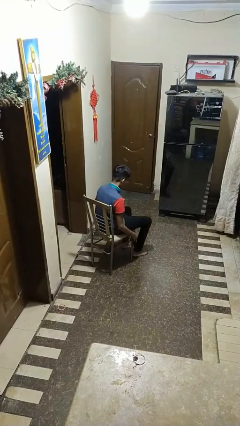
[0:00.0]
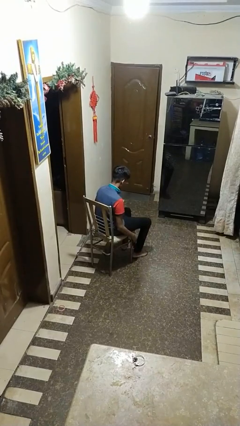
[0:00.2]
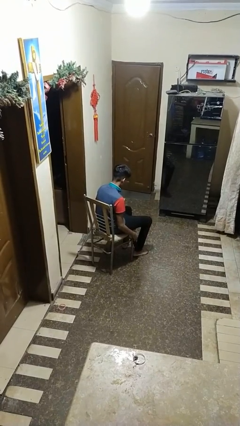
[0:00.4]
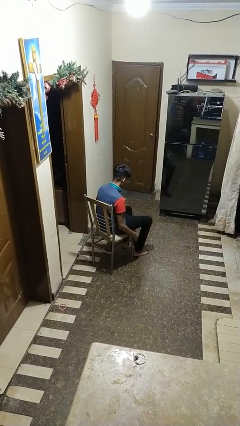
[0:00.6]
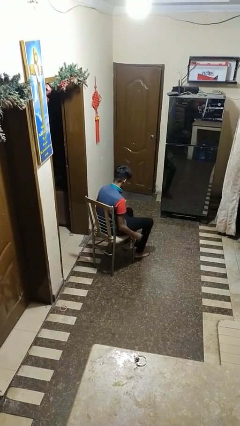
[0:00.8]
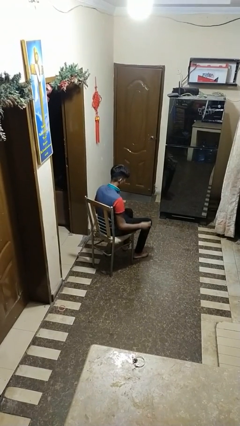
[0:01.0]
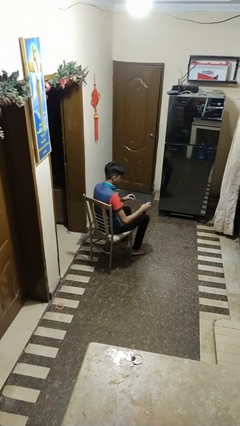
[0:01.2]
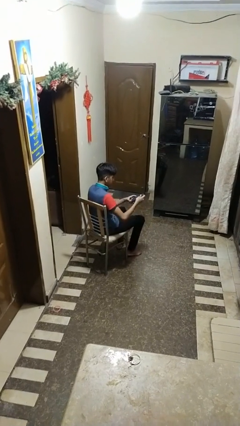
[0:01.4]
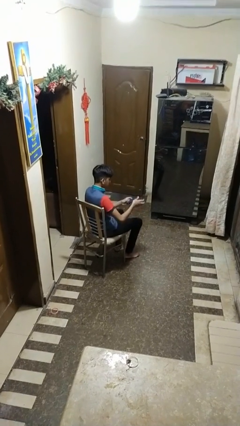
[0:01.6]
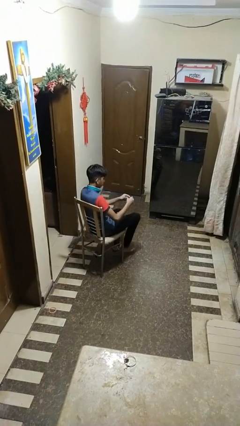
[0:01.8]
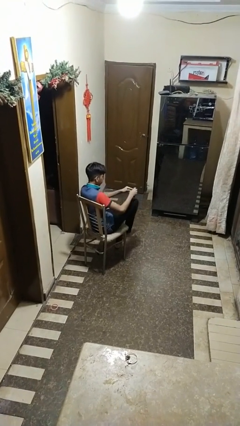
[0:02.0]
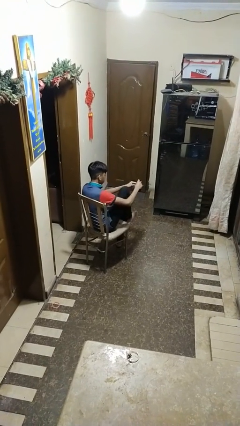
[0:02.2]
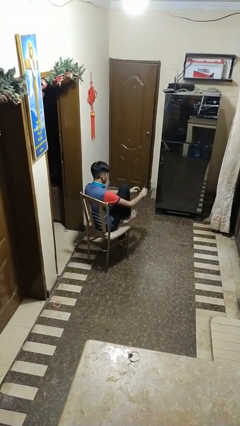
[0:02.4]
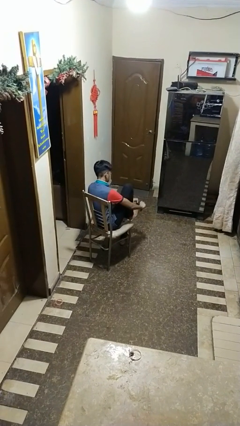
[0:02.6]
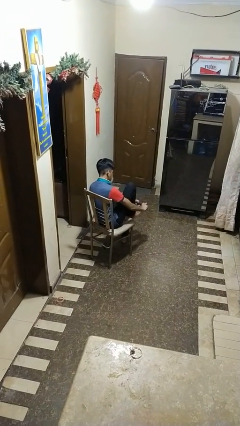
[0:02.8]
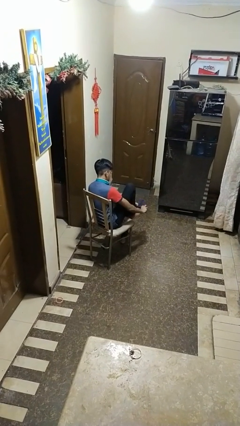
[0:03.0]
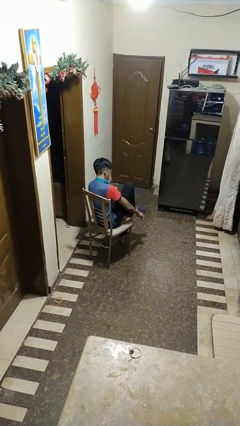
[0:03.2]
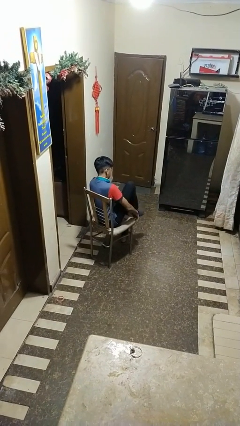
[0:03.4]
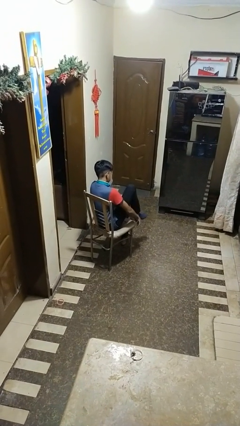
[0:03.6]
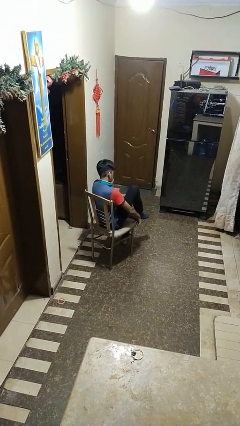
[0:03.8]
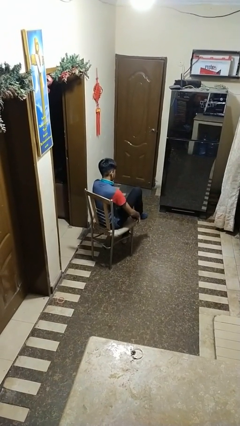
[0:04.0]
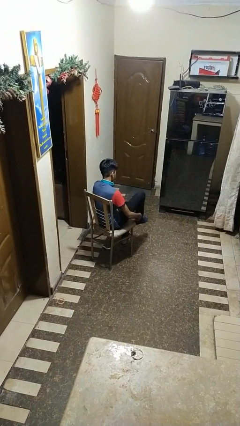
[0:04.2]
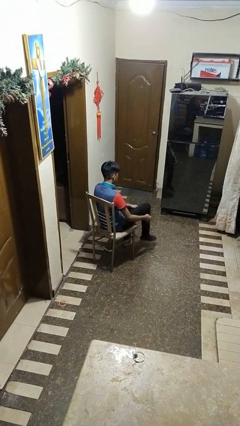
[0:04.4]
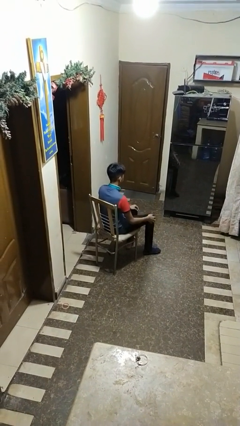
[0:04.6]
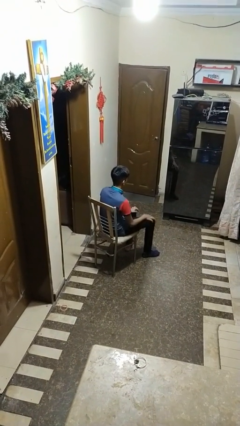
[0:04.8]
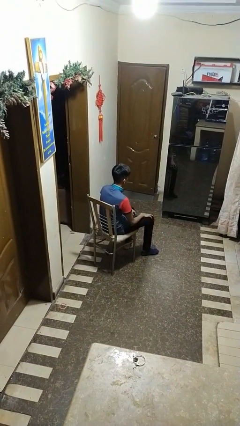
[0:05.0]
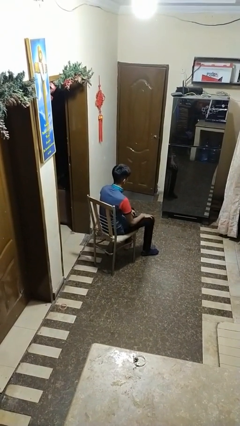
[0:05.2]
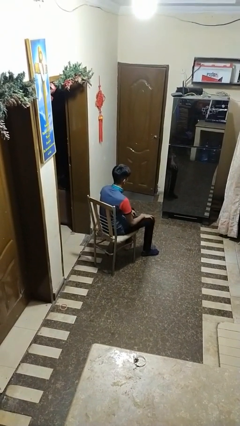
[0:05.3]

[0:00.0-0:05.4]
person puts on socks

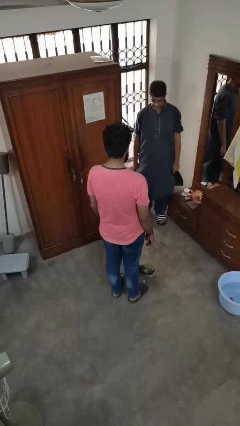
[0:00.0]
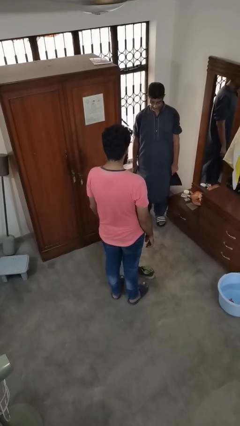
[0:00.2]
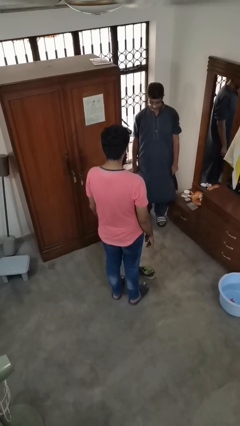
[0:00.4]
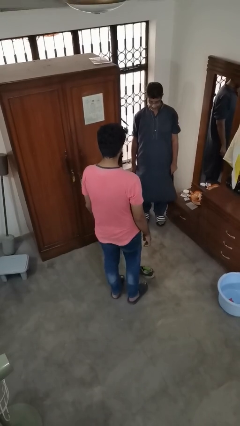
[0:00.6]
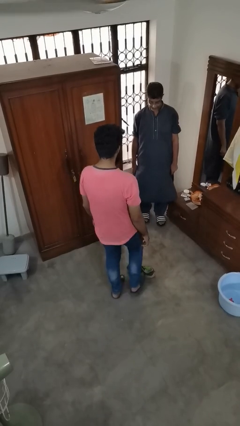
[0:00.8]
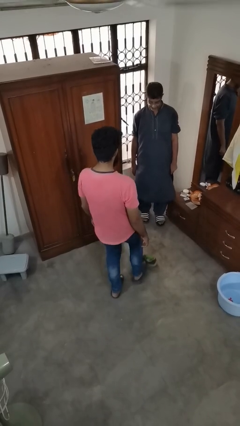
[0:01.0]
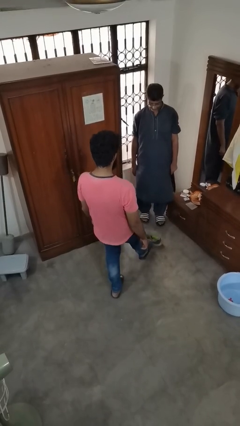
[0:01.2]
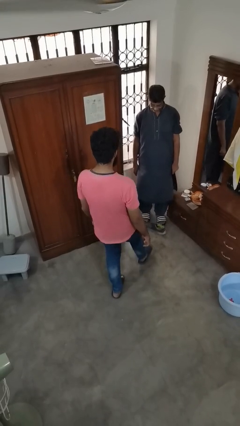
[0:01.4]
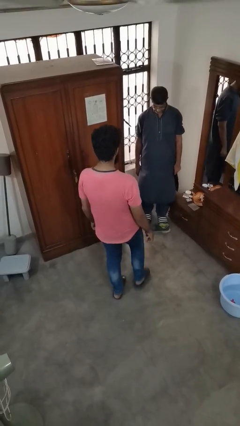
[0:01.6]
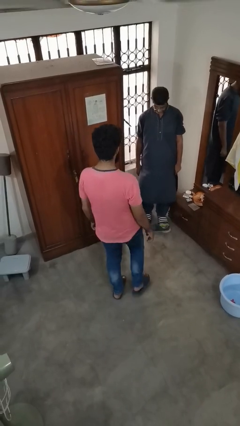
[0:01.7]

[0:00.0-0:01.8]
person kicks object to person

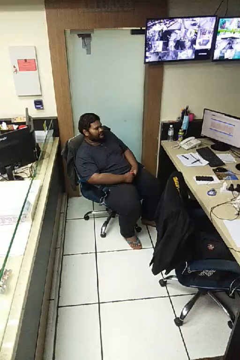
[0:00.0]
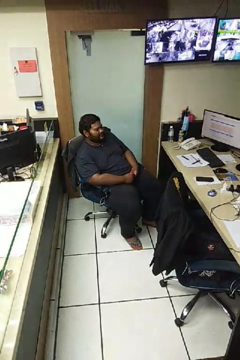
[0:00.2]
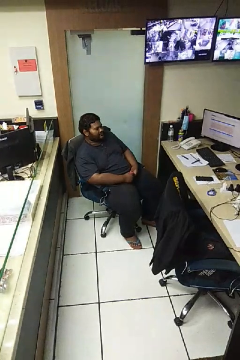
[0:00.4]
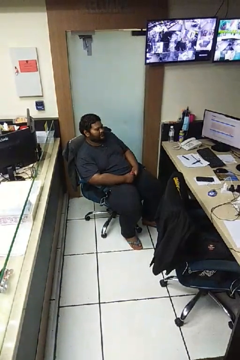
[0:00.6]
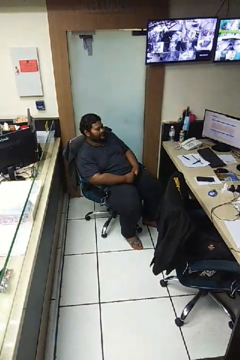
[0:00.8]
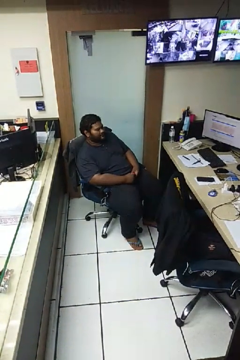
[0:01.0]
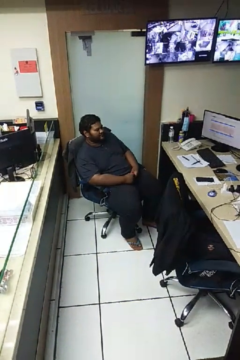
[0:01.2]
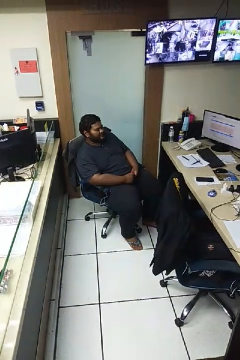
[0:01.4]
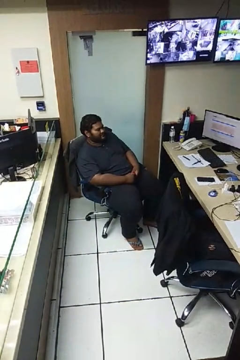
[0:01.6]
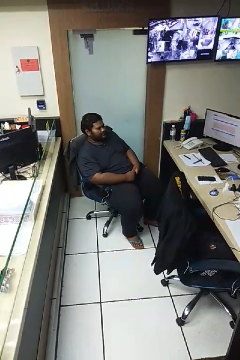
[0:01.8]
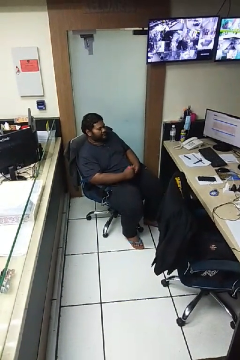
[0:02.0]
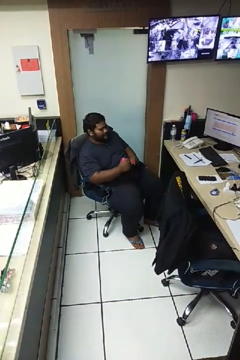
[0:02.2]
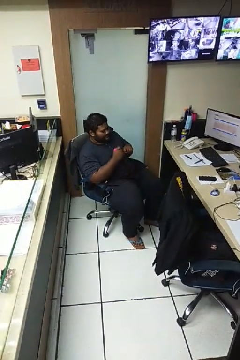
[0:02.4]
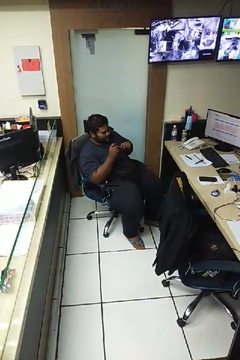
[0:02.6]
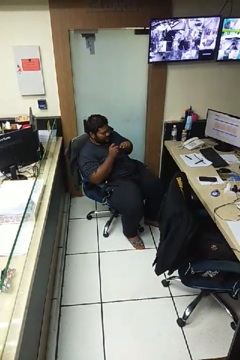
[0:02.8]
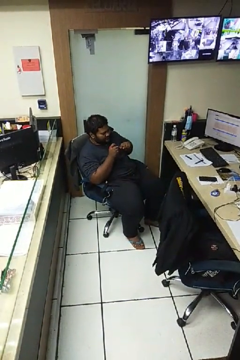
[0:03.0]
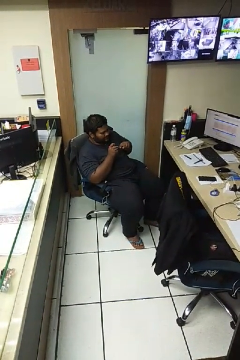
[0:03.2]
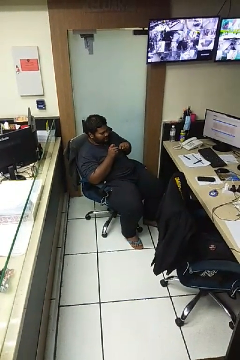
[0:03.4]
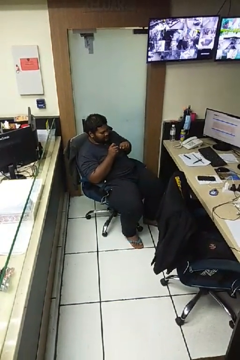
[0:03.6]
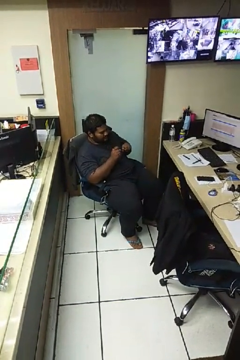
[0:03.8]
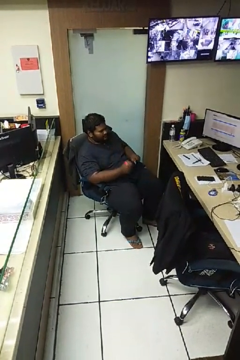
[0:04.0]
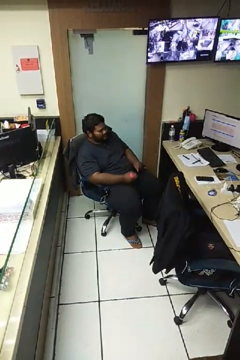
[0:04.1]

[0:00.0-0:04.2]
person paints fingernails

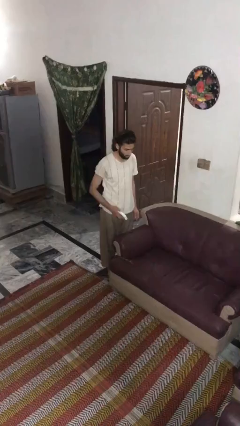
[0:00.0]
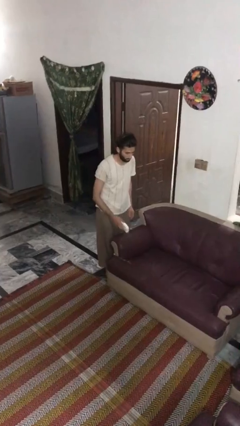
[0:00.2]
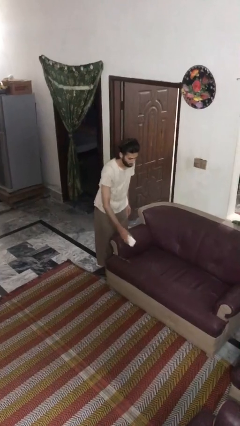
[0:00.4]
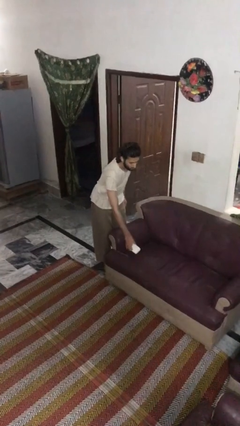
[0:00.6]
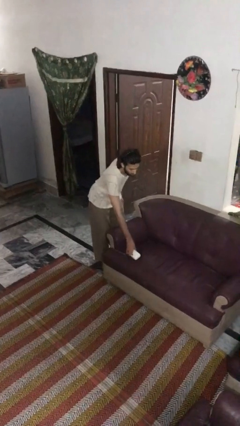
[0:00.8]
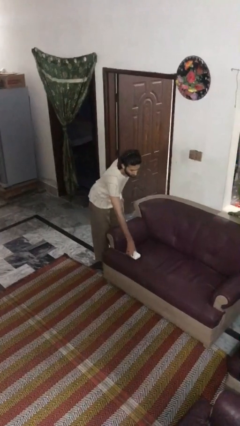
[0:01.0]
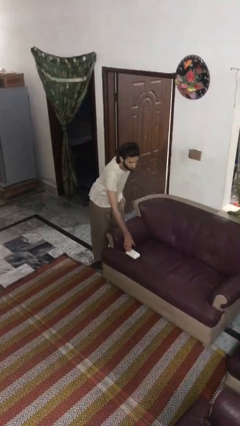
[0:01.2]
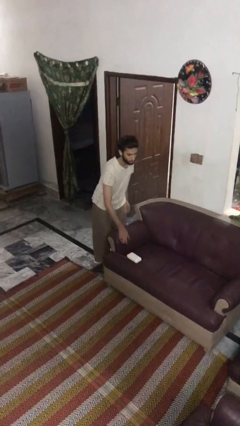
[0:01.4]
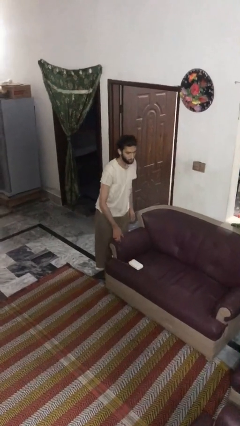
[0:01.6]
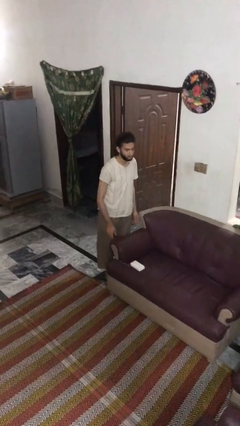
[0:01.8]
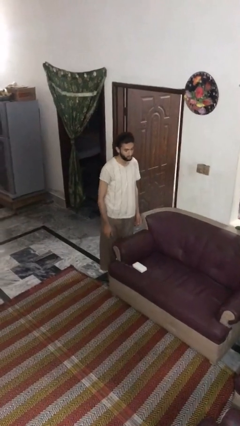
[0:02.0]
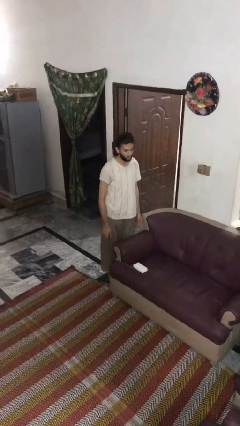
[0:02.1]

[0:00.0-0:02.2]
person puts down object on couch

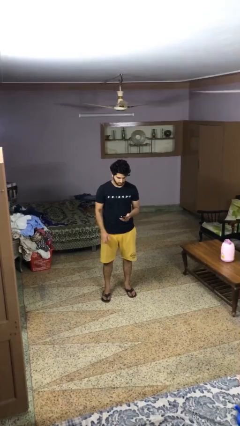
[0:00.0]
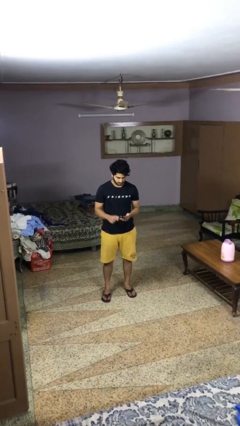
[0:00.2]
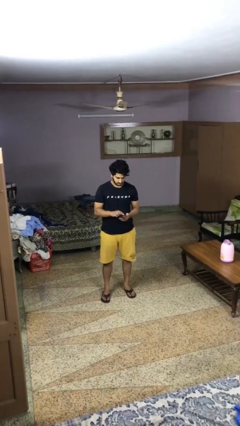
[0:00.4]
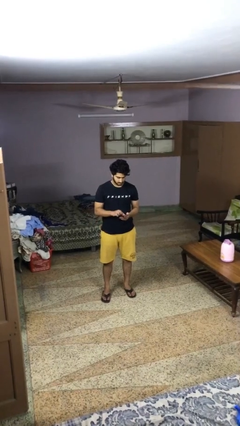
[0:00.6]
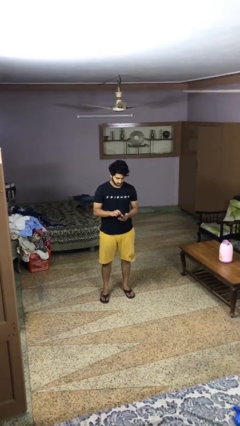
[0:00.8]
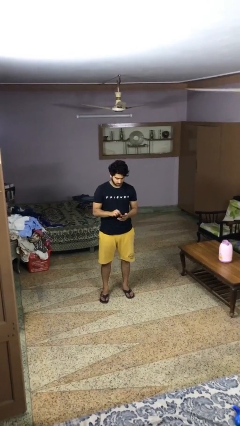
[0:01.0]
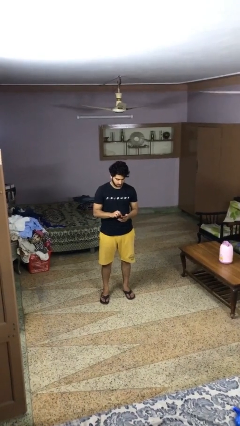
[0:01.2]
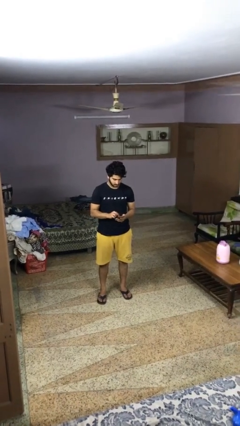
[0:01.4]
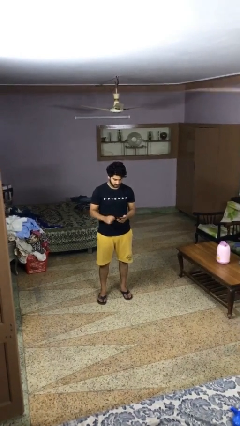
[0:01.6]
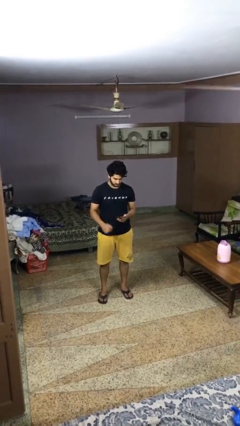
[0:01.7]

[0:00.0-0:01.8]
person gestures zoom out

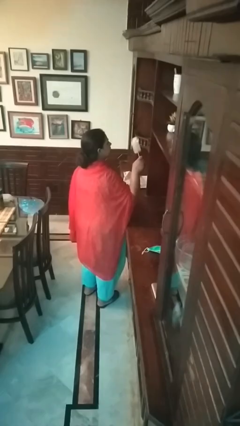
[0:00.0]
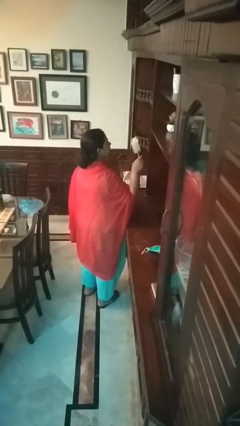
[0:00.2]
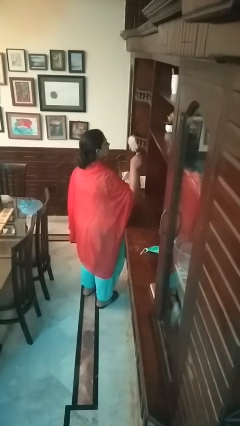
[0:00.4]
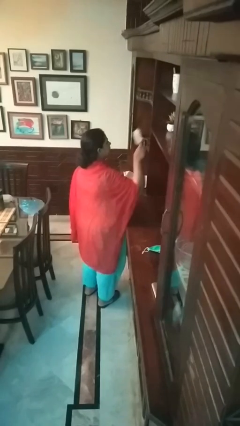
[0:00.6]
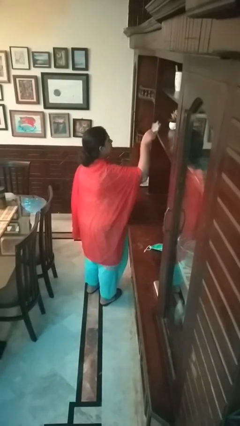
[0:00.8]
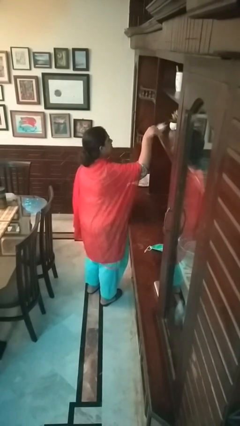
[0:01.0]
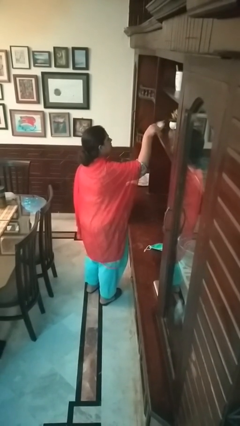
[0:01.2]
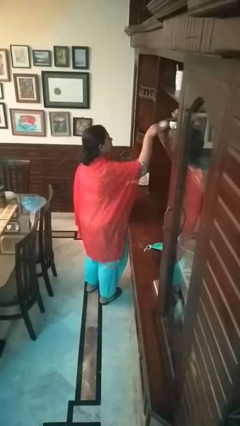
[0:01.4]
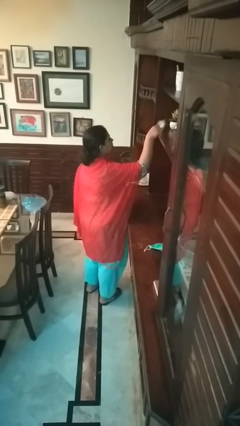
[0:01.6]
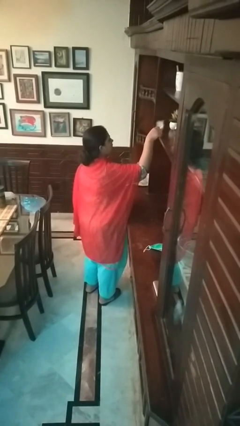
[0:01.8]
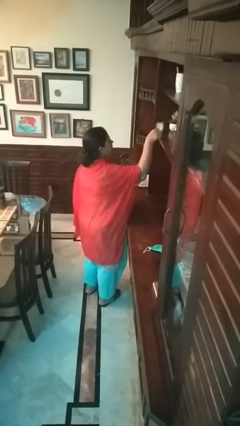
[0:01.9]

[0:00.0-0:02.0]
person dusts furniture

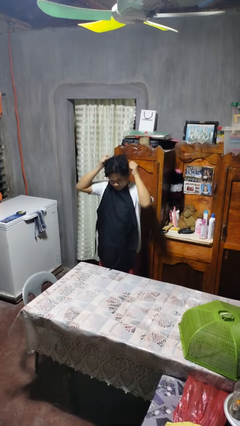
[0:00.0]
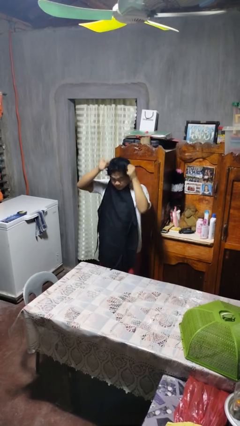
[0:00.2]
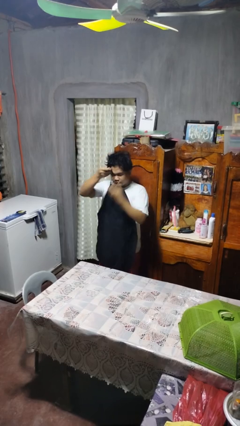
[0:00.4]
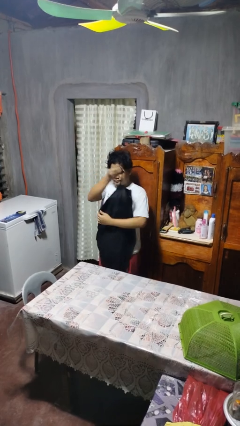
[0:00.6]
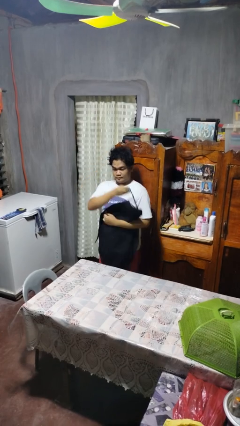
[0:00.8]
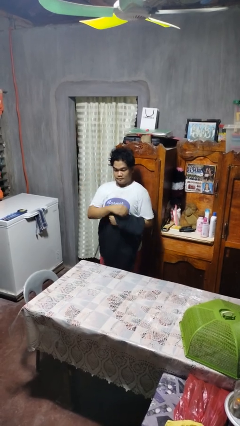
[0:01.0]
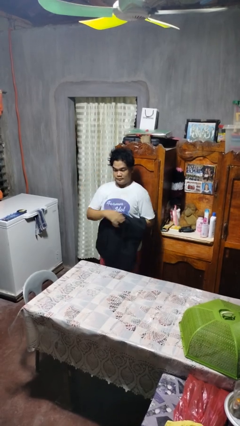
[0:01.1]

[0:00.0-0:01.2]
person takes off apron
